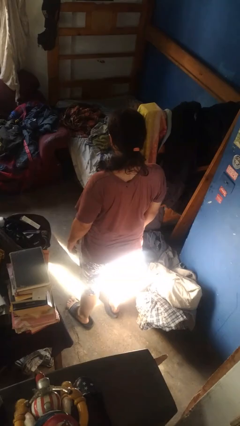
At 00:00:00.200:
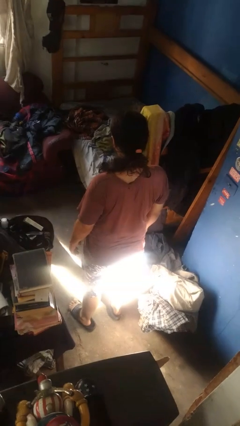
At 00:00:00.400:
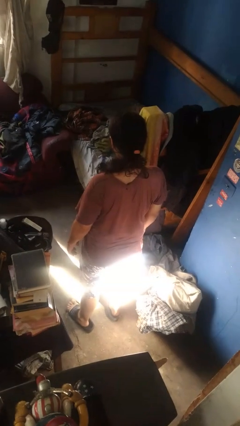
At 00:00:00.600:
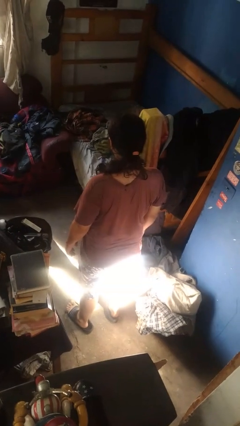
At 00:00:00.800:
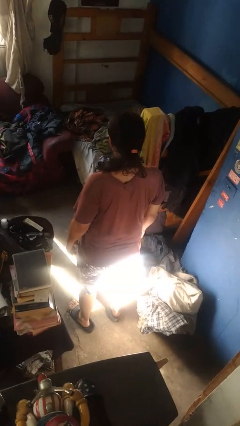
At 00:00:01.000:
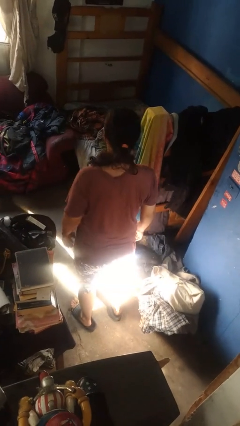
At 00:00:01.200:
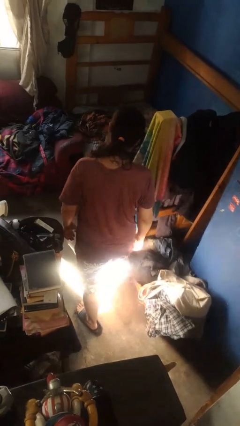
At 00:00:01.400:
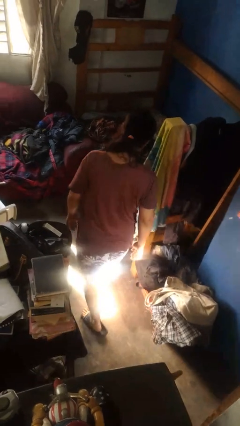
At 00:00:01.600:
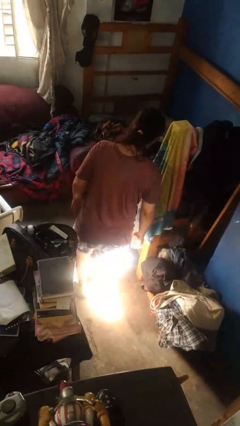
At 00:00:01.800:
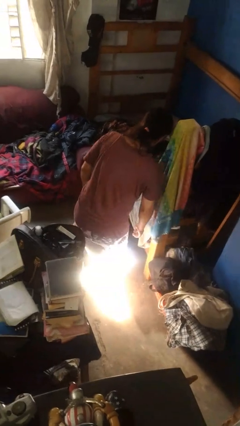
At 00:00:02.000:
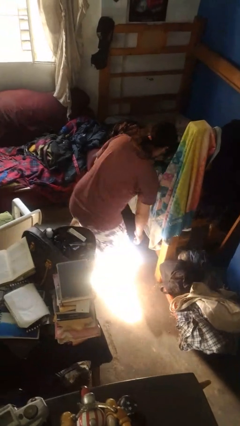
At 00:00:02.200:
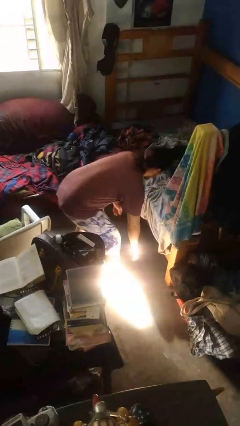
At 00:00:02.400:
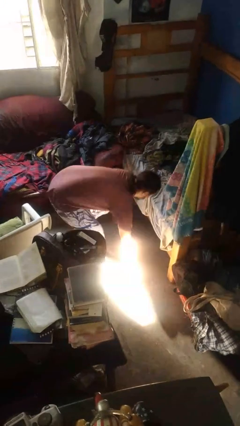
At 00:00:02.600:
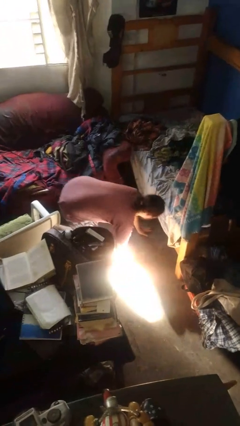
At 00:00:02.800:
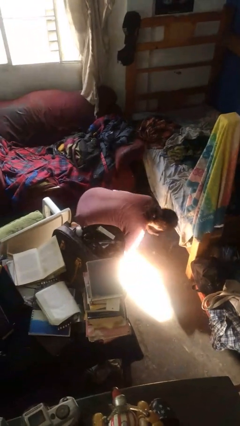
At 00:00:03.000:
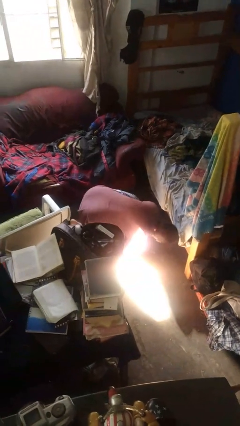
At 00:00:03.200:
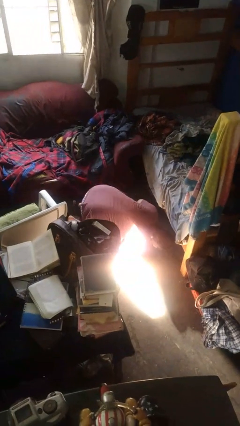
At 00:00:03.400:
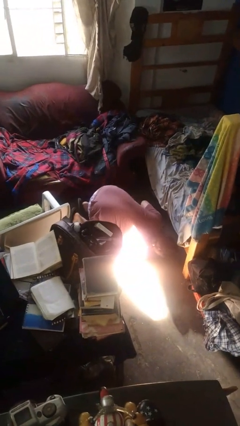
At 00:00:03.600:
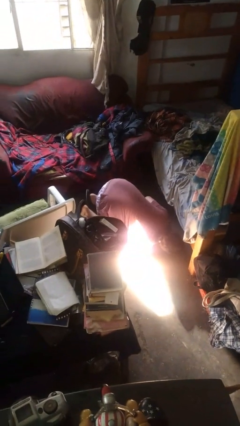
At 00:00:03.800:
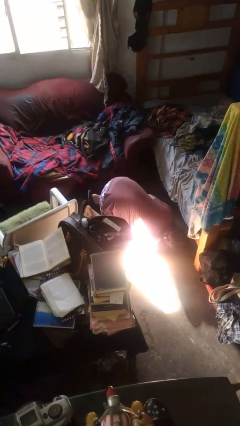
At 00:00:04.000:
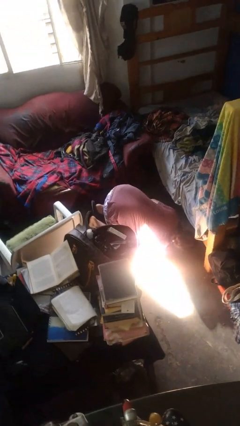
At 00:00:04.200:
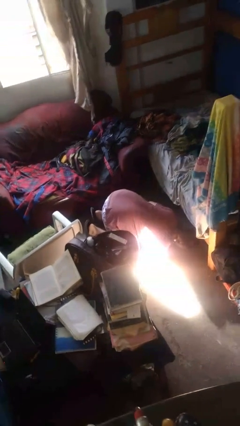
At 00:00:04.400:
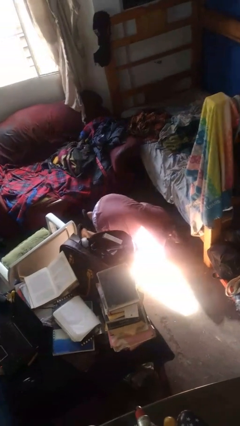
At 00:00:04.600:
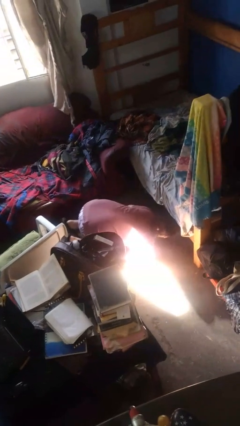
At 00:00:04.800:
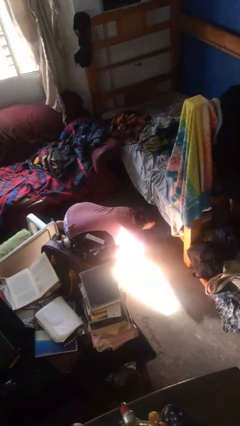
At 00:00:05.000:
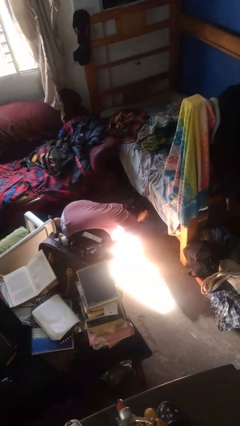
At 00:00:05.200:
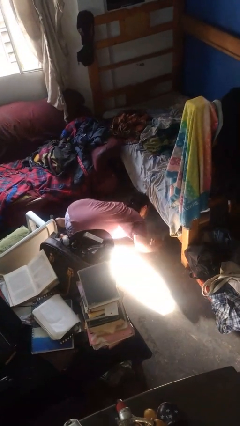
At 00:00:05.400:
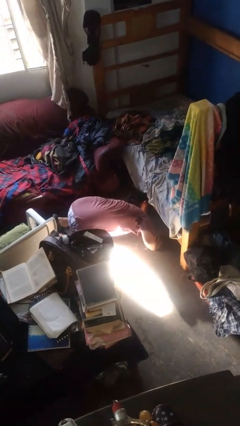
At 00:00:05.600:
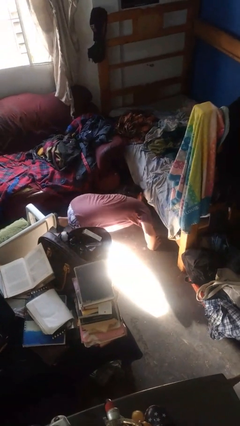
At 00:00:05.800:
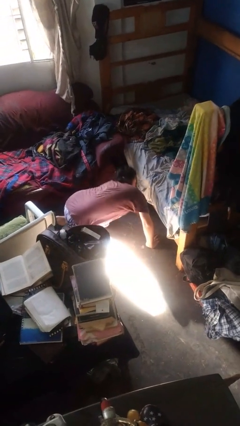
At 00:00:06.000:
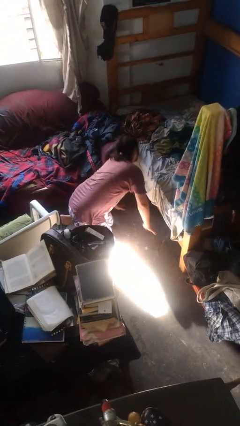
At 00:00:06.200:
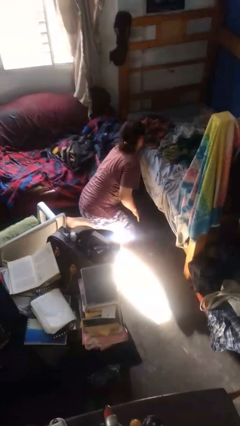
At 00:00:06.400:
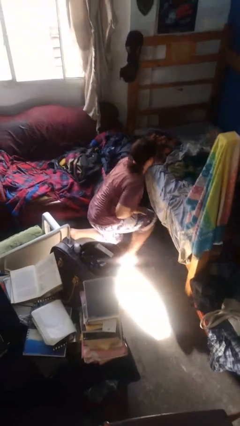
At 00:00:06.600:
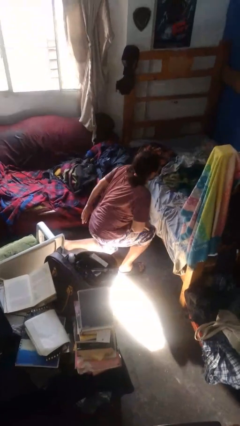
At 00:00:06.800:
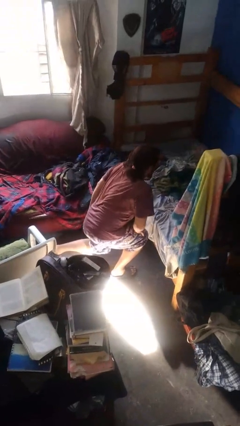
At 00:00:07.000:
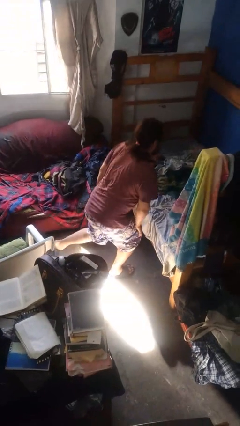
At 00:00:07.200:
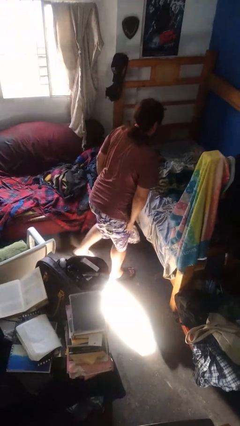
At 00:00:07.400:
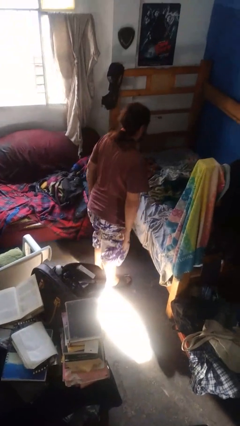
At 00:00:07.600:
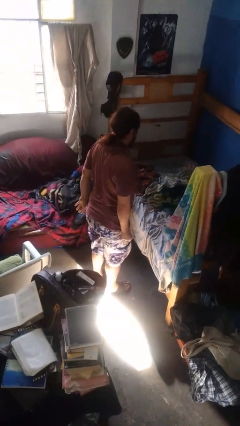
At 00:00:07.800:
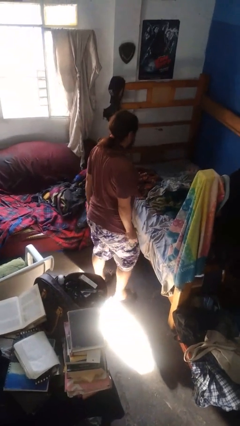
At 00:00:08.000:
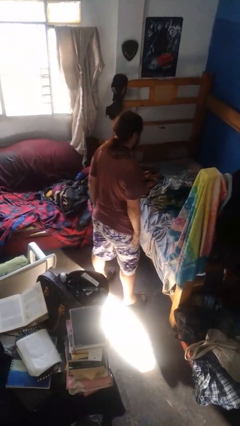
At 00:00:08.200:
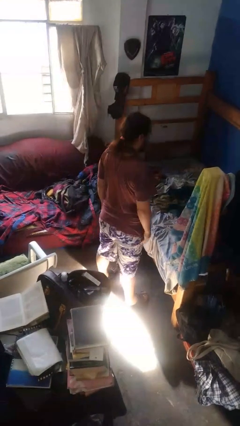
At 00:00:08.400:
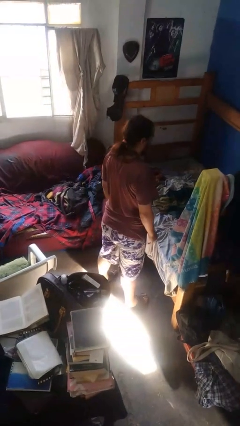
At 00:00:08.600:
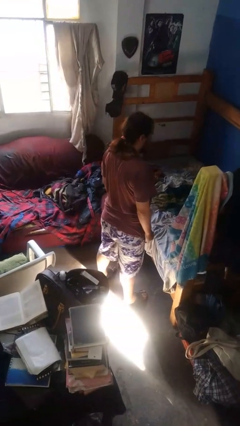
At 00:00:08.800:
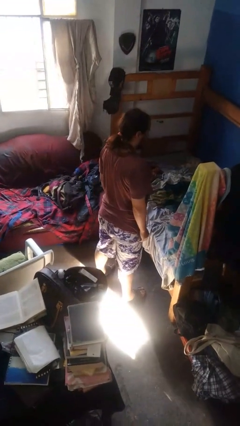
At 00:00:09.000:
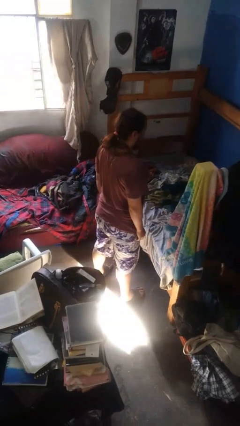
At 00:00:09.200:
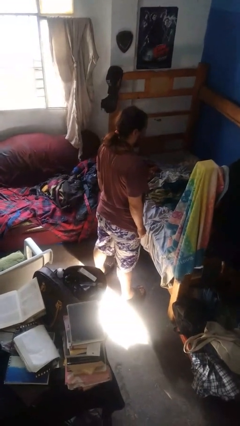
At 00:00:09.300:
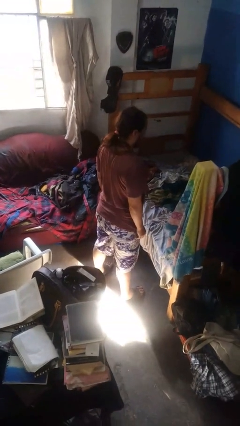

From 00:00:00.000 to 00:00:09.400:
person searches under bed

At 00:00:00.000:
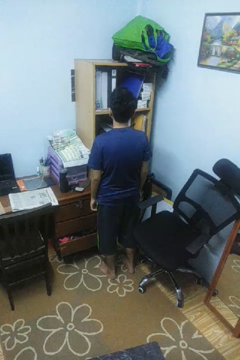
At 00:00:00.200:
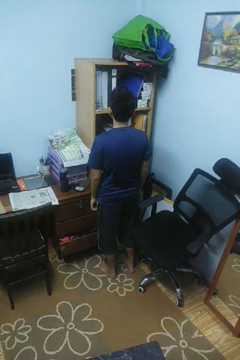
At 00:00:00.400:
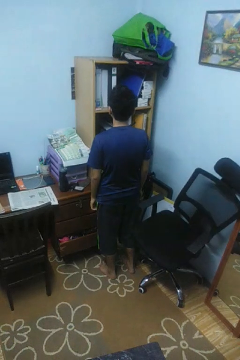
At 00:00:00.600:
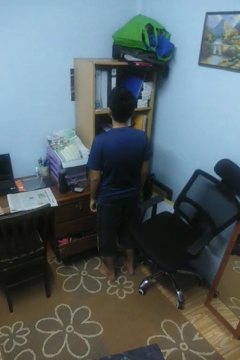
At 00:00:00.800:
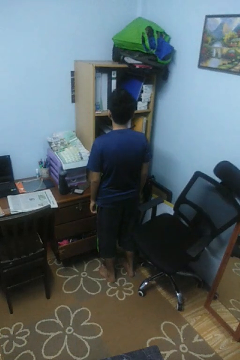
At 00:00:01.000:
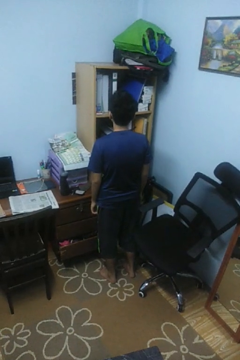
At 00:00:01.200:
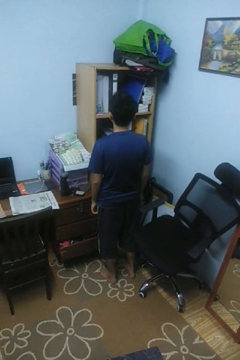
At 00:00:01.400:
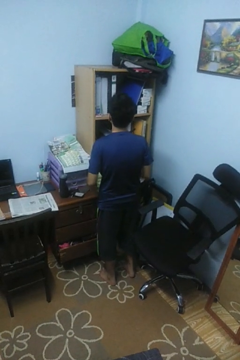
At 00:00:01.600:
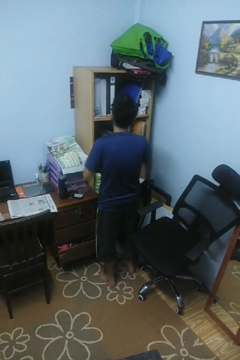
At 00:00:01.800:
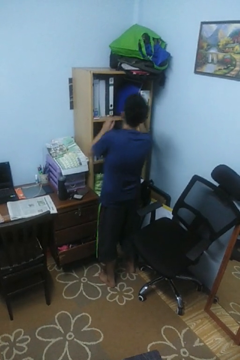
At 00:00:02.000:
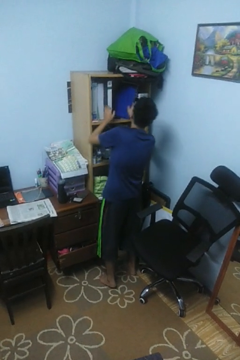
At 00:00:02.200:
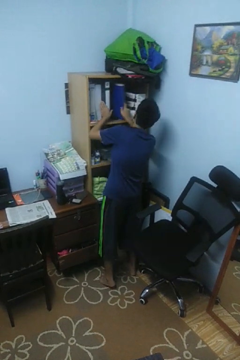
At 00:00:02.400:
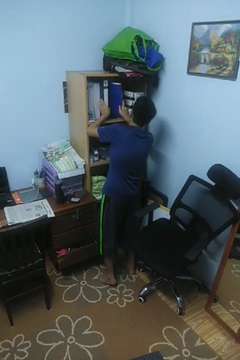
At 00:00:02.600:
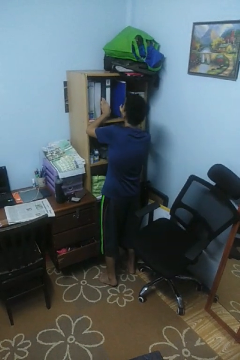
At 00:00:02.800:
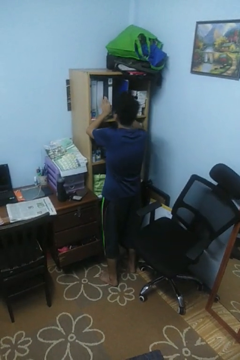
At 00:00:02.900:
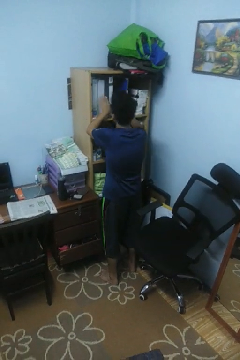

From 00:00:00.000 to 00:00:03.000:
person searches in cabinet

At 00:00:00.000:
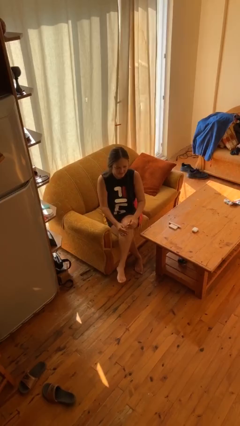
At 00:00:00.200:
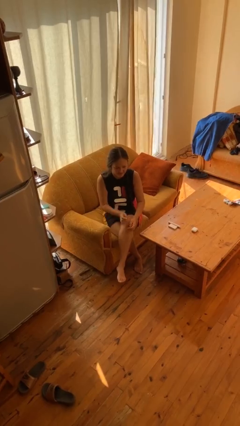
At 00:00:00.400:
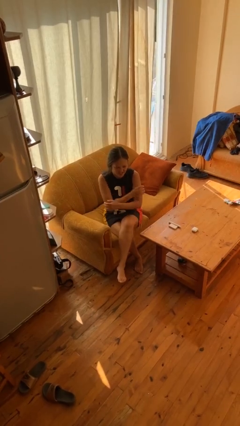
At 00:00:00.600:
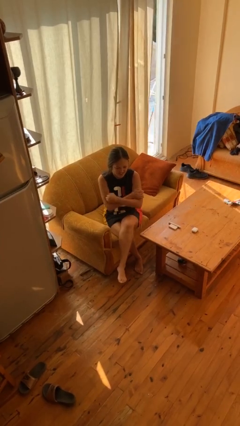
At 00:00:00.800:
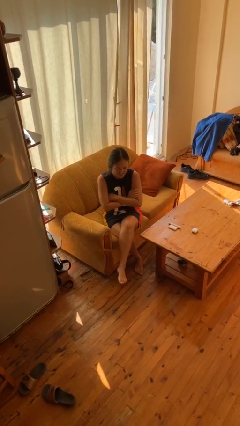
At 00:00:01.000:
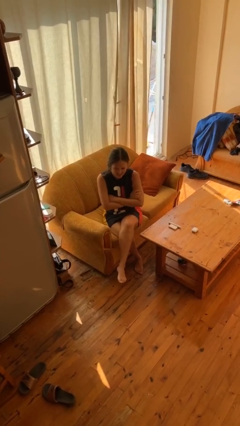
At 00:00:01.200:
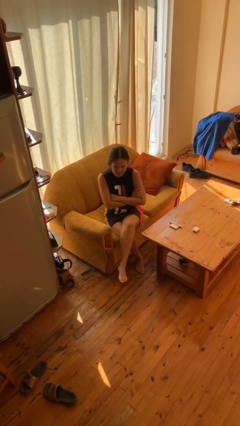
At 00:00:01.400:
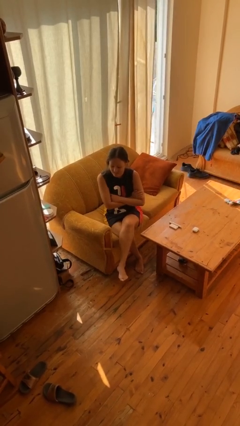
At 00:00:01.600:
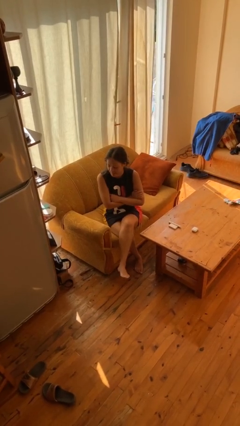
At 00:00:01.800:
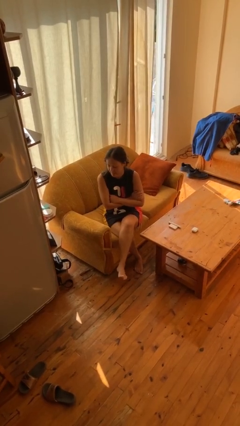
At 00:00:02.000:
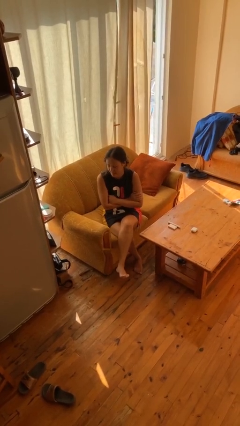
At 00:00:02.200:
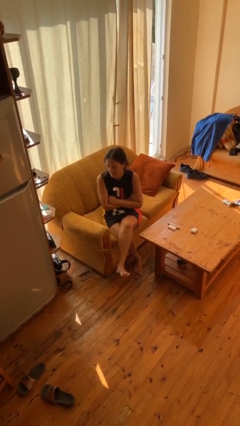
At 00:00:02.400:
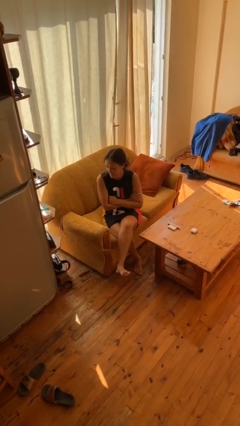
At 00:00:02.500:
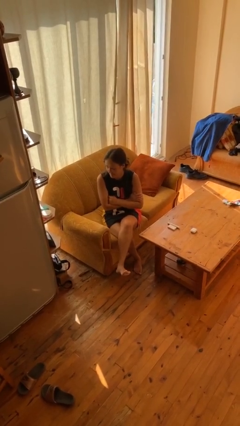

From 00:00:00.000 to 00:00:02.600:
person crosses arms

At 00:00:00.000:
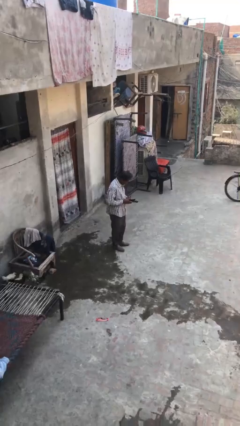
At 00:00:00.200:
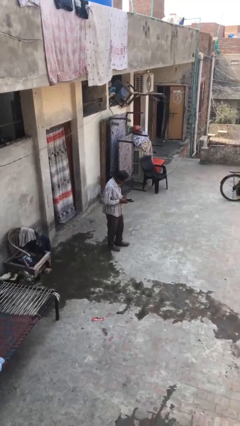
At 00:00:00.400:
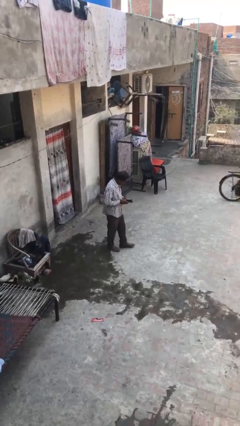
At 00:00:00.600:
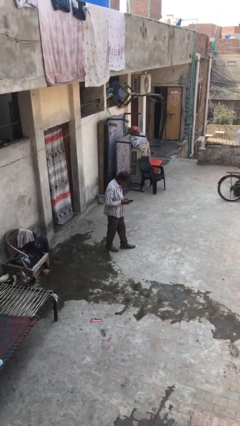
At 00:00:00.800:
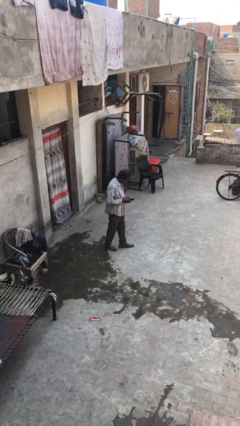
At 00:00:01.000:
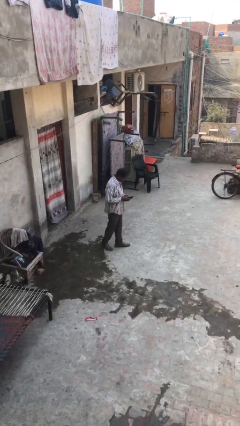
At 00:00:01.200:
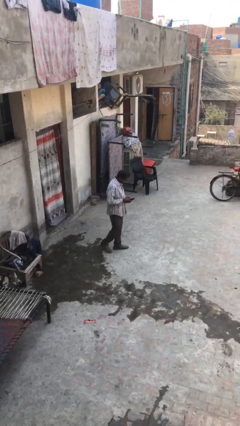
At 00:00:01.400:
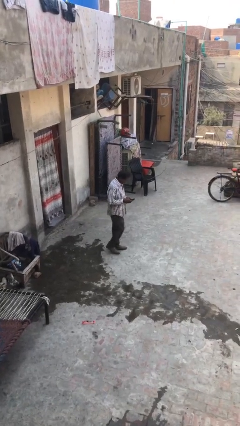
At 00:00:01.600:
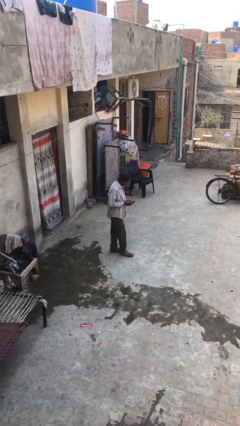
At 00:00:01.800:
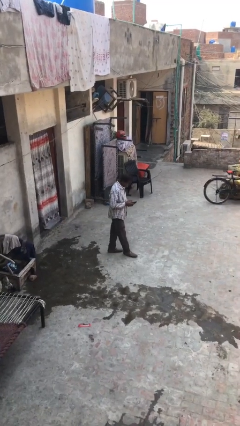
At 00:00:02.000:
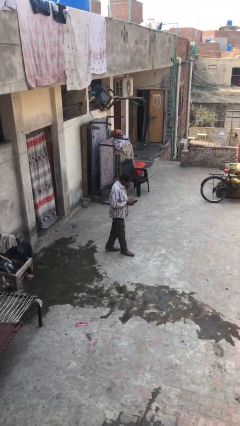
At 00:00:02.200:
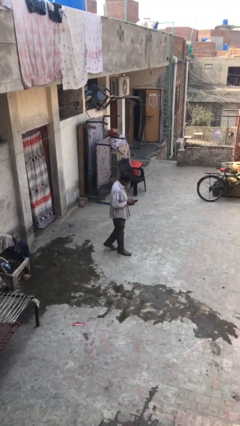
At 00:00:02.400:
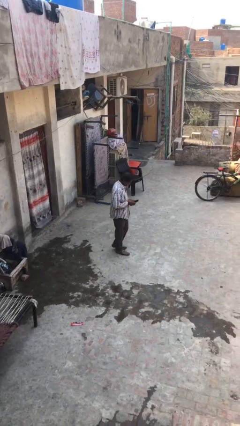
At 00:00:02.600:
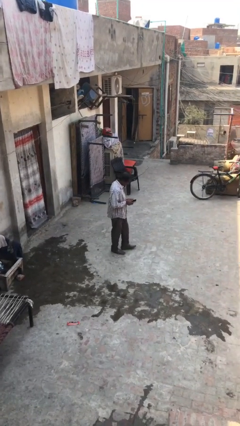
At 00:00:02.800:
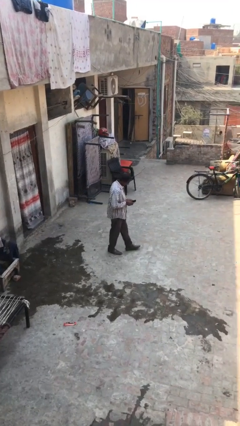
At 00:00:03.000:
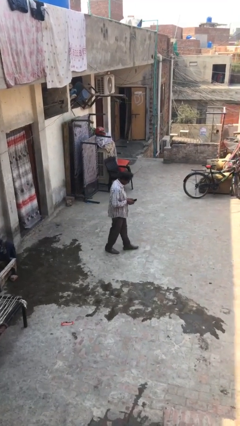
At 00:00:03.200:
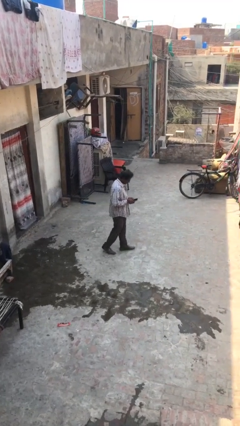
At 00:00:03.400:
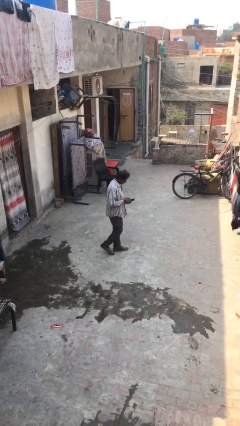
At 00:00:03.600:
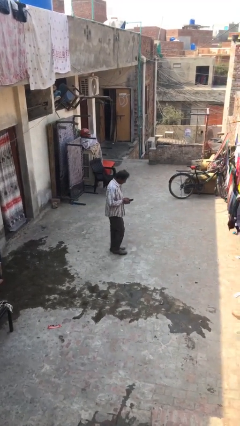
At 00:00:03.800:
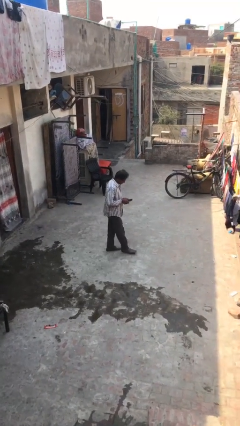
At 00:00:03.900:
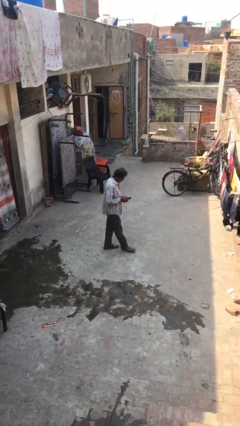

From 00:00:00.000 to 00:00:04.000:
person texts on phone
